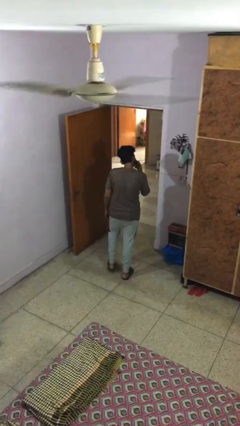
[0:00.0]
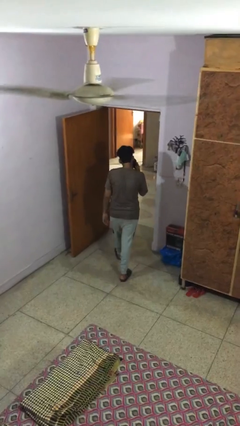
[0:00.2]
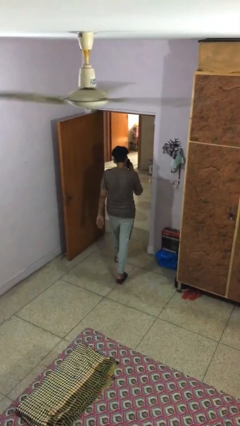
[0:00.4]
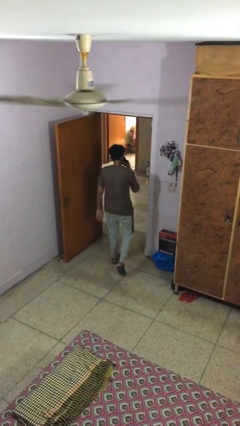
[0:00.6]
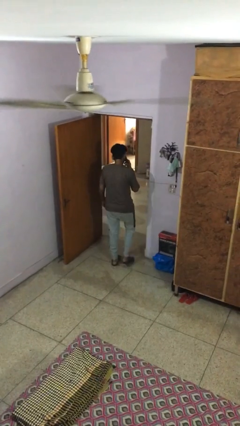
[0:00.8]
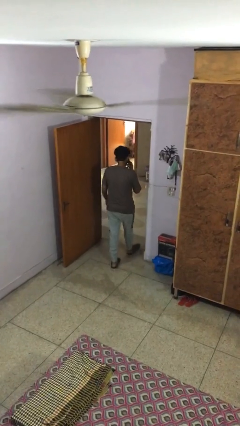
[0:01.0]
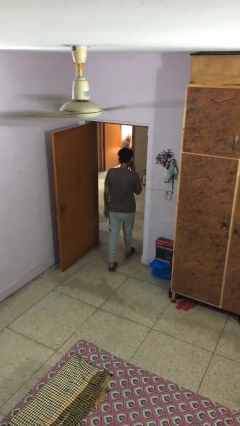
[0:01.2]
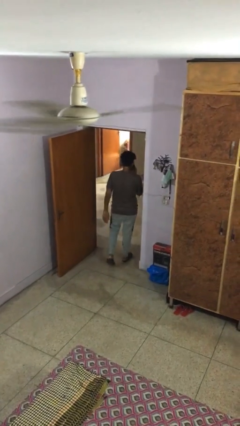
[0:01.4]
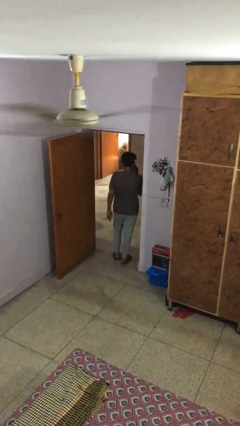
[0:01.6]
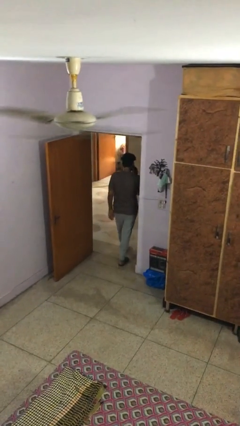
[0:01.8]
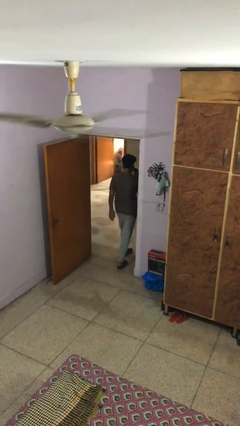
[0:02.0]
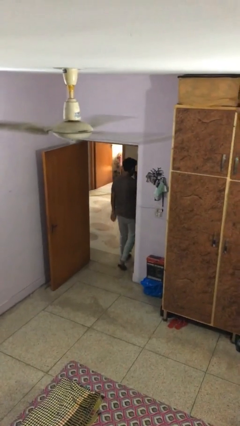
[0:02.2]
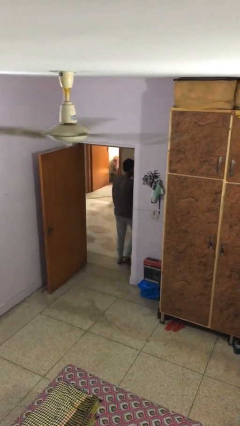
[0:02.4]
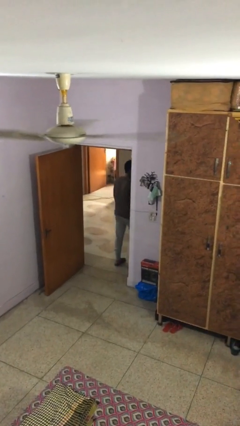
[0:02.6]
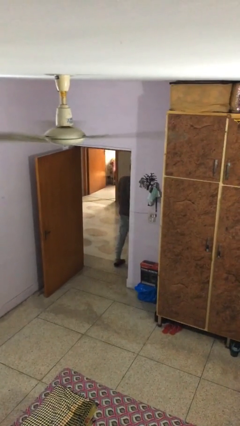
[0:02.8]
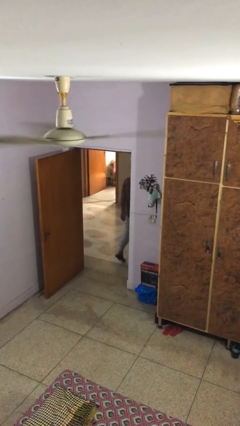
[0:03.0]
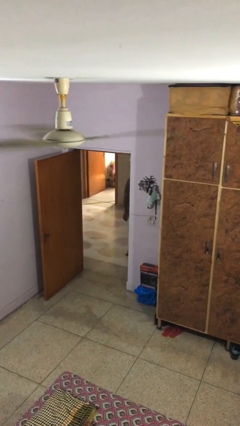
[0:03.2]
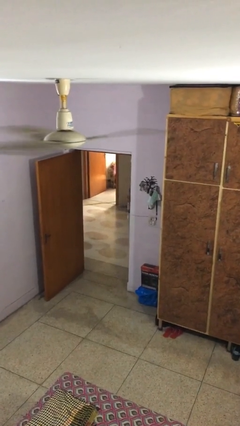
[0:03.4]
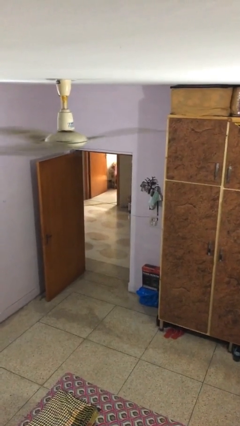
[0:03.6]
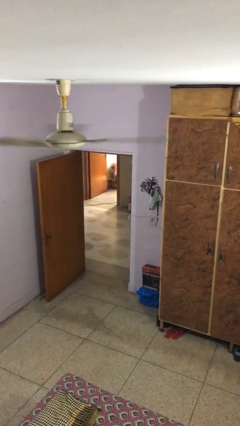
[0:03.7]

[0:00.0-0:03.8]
person exits scene through structure

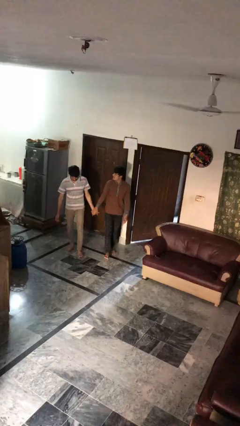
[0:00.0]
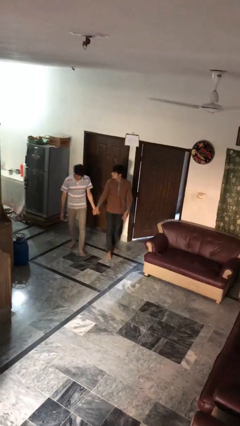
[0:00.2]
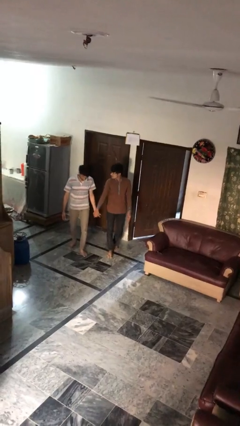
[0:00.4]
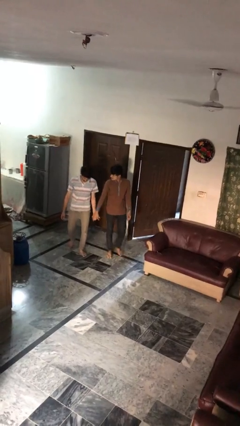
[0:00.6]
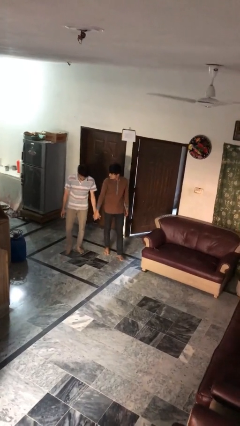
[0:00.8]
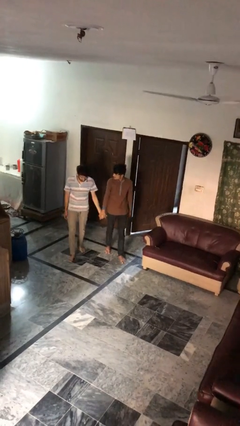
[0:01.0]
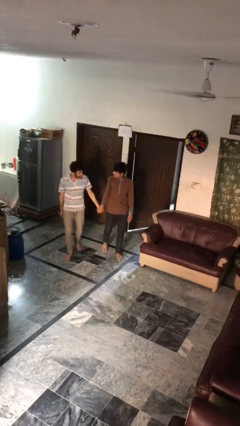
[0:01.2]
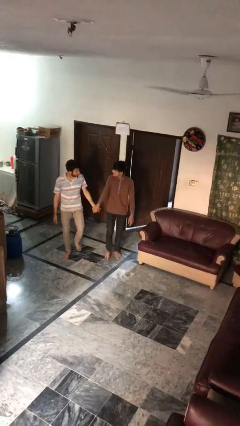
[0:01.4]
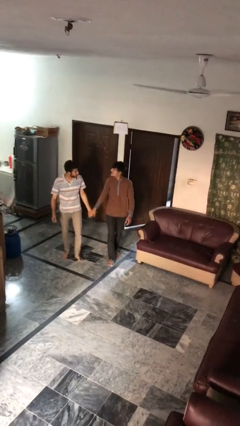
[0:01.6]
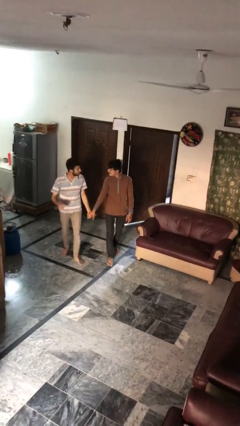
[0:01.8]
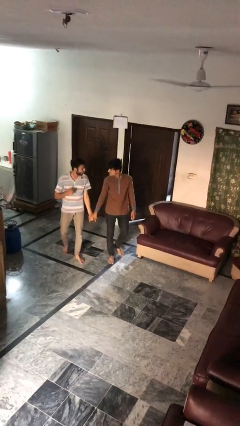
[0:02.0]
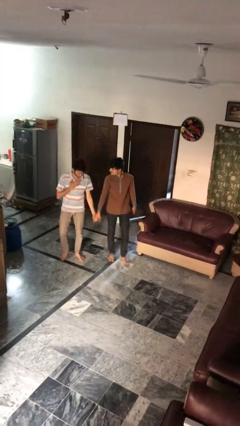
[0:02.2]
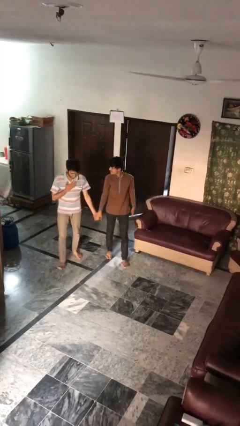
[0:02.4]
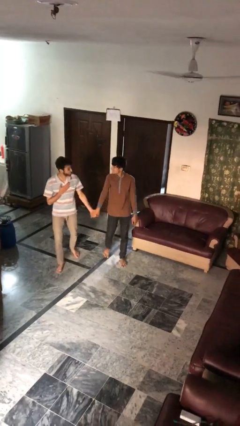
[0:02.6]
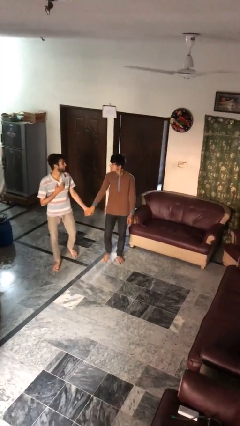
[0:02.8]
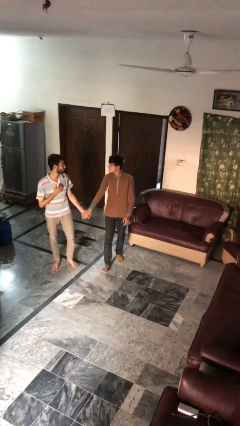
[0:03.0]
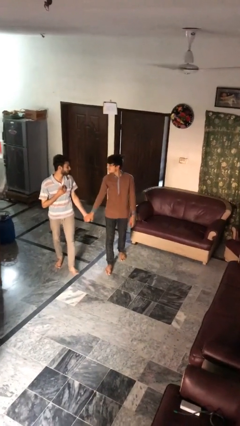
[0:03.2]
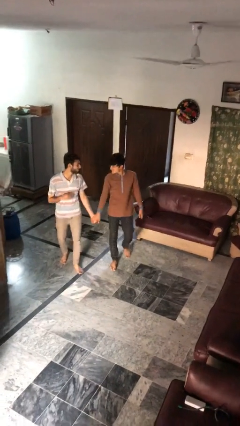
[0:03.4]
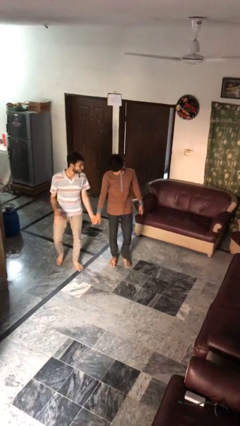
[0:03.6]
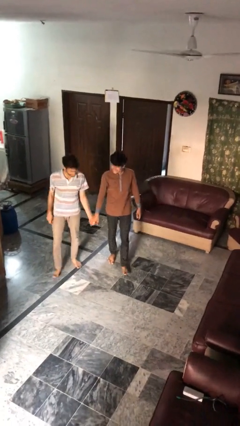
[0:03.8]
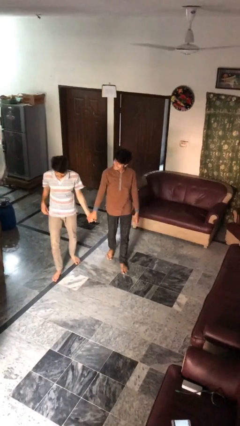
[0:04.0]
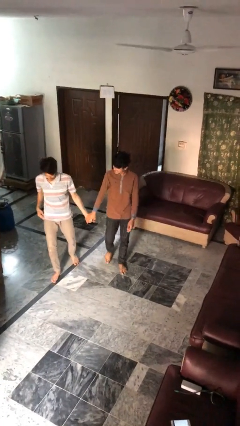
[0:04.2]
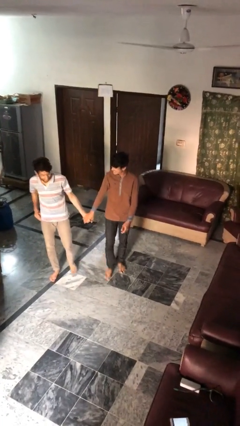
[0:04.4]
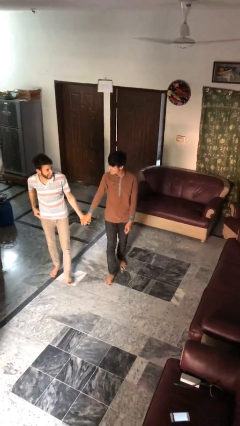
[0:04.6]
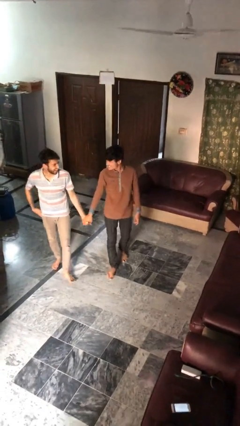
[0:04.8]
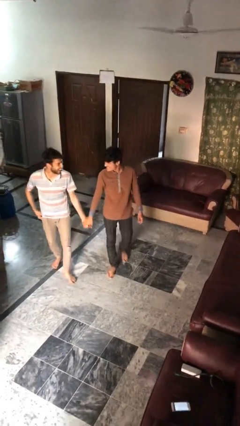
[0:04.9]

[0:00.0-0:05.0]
person holds hand

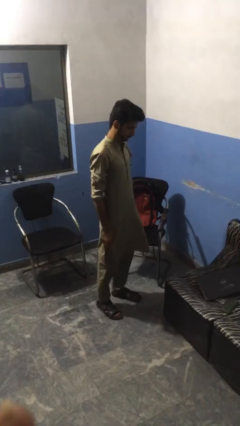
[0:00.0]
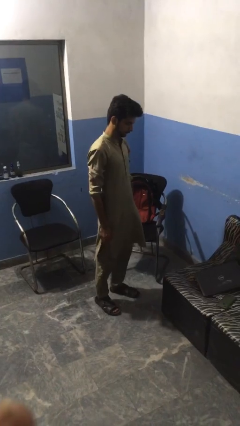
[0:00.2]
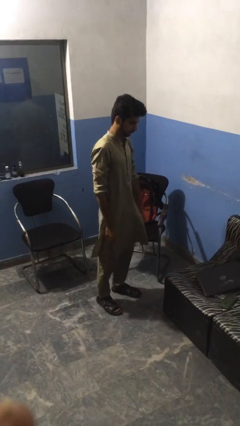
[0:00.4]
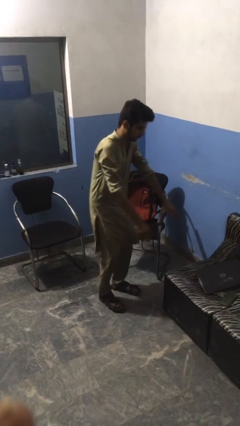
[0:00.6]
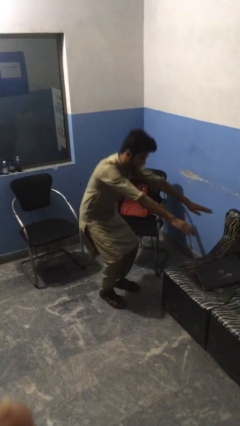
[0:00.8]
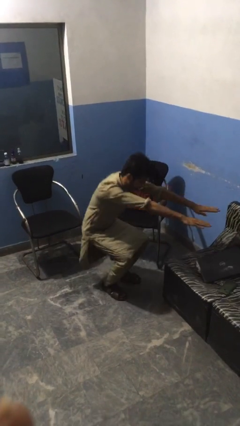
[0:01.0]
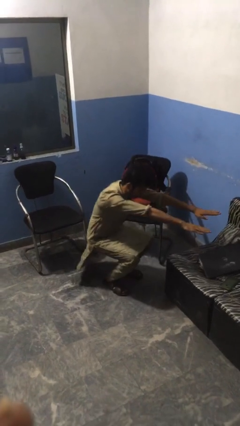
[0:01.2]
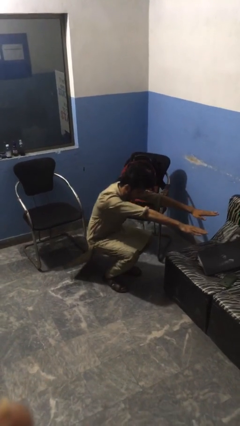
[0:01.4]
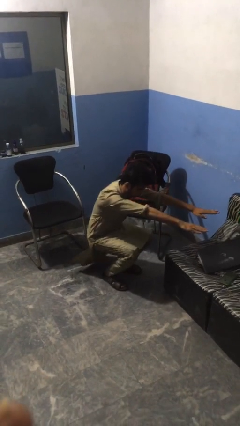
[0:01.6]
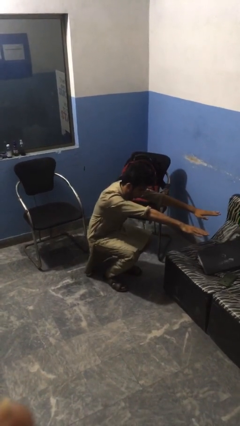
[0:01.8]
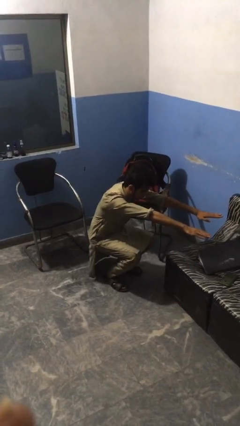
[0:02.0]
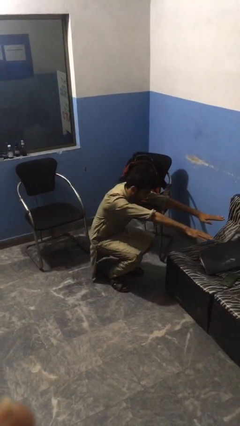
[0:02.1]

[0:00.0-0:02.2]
person squats

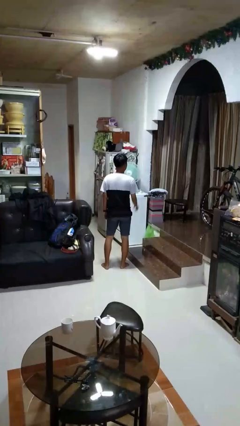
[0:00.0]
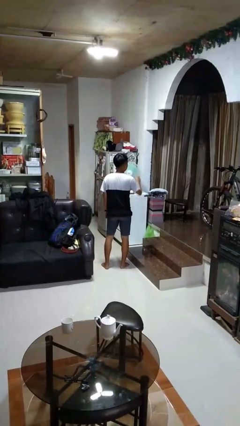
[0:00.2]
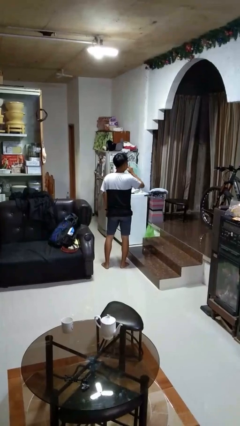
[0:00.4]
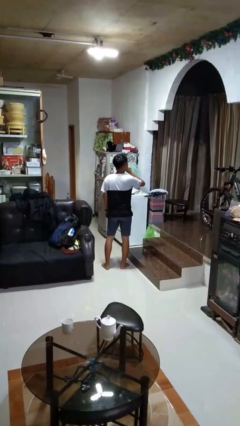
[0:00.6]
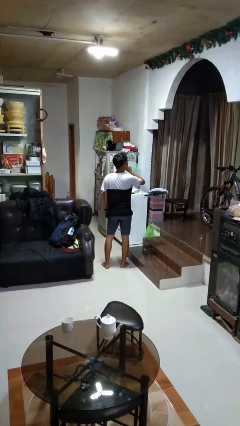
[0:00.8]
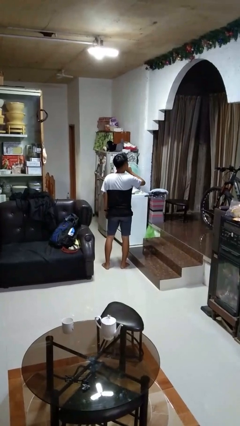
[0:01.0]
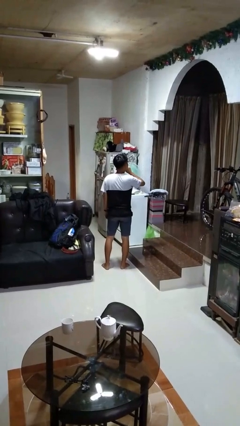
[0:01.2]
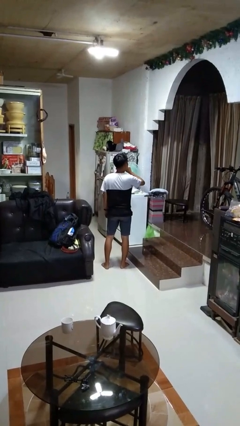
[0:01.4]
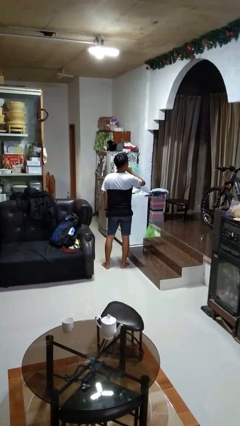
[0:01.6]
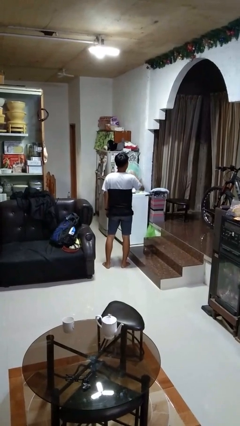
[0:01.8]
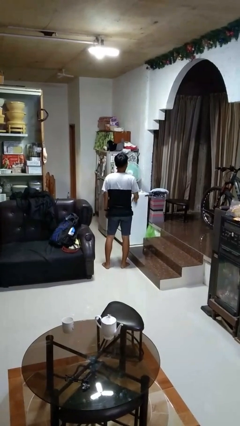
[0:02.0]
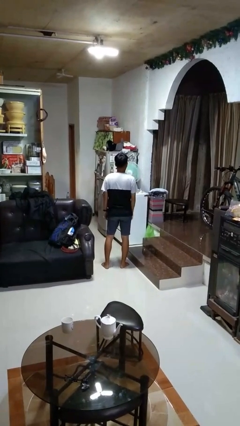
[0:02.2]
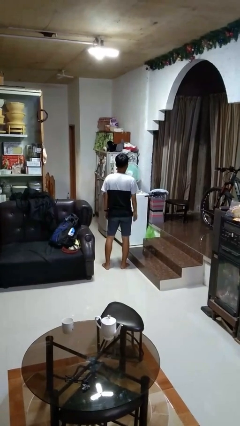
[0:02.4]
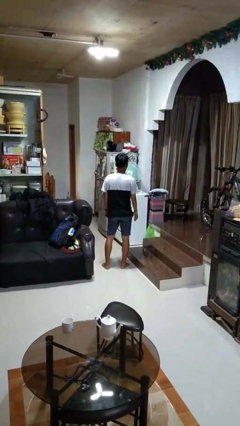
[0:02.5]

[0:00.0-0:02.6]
person gestures be quiet

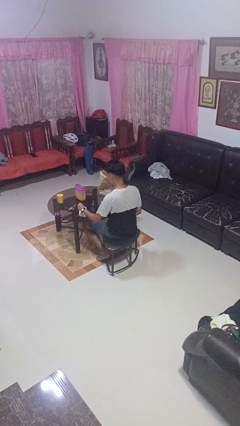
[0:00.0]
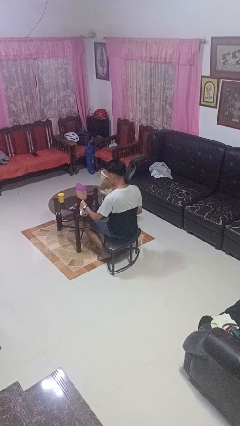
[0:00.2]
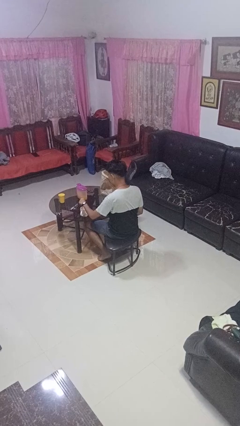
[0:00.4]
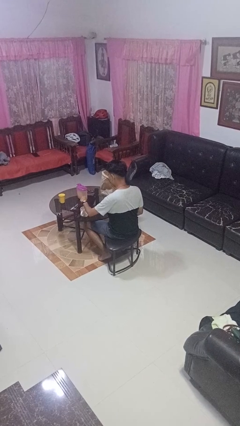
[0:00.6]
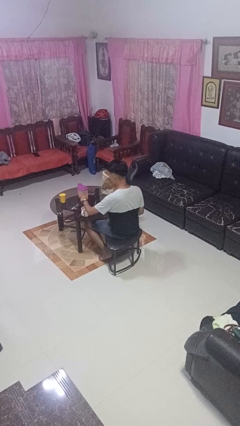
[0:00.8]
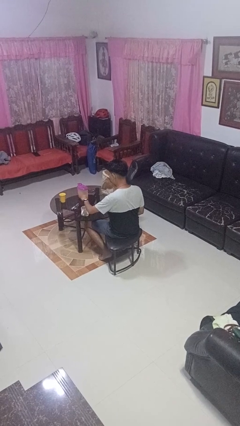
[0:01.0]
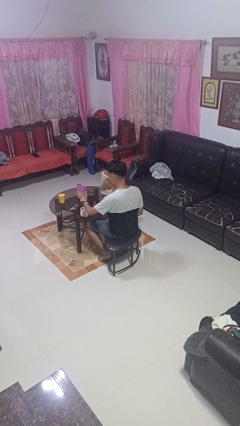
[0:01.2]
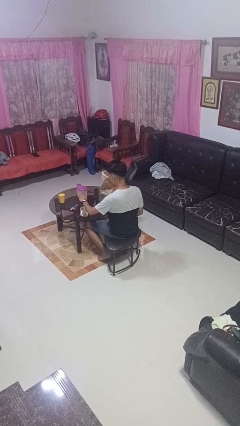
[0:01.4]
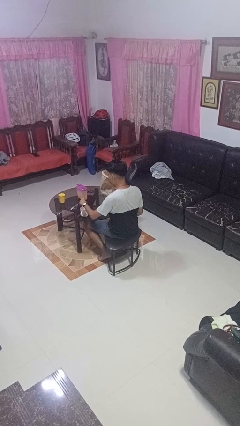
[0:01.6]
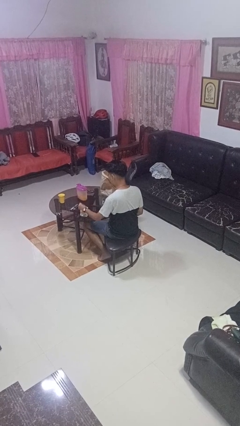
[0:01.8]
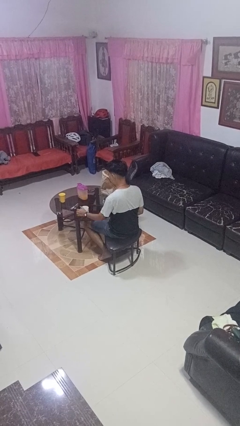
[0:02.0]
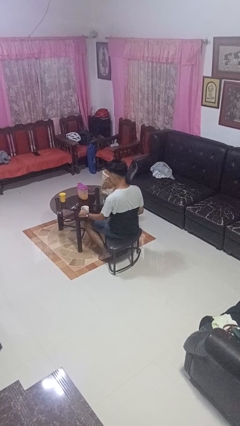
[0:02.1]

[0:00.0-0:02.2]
person stirs mug

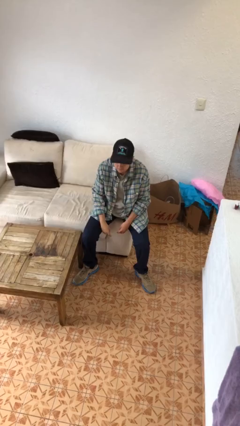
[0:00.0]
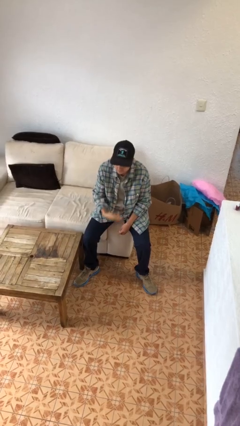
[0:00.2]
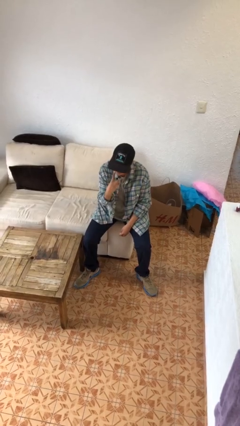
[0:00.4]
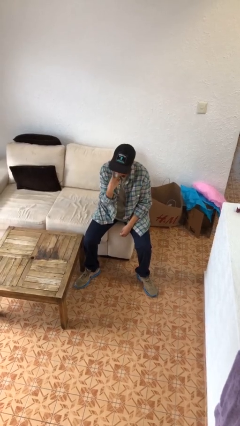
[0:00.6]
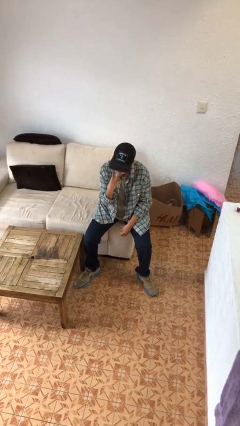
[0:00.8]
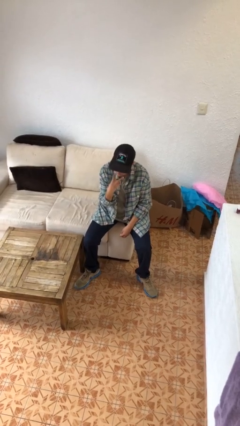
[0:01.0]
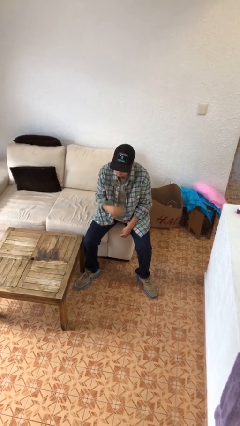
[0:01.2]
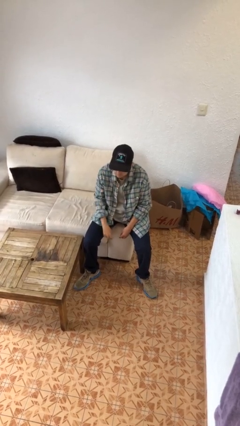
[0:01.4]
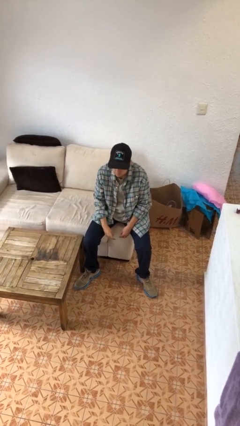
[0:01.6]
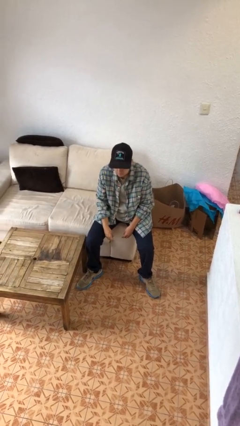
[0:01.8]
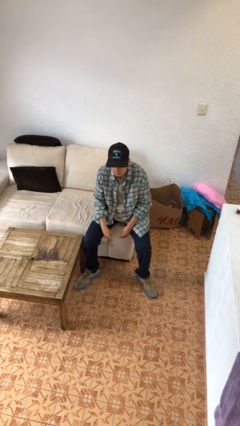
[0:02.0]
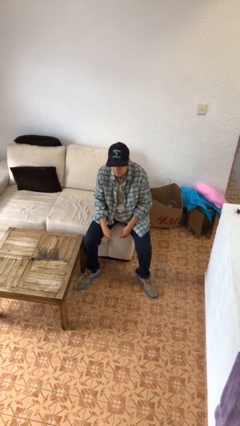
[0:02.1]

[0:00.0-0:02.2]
person gestures watch closely
